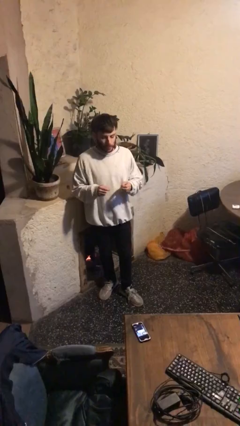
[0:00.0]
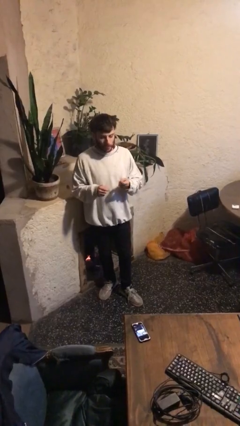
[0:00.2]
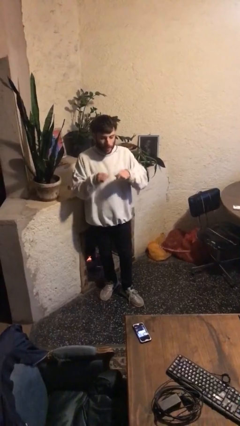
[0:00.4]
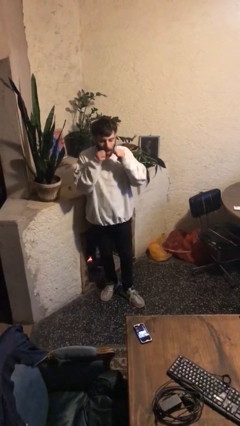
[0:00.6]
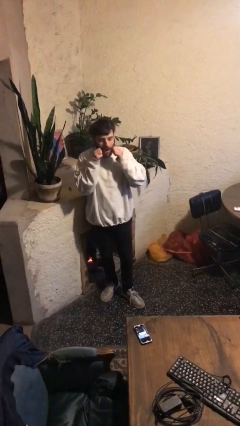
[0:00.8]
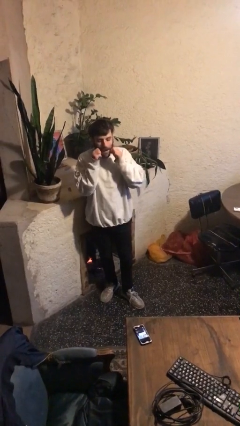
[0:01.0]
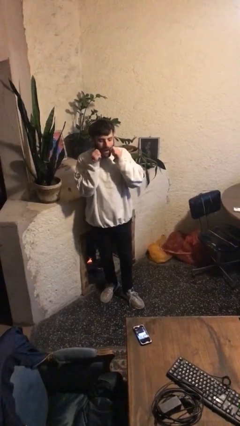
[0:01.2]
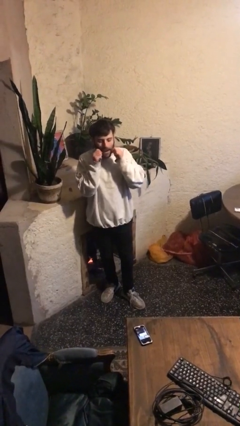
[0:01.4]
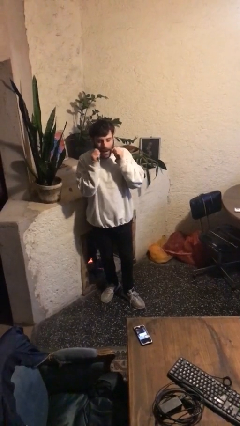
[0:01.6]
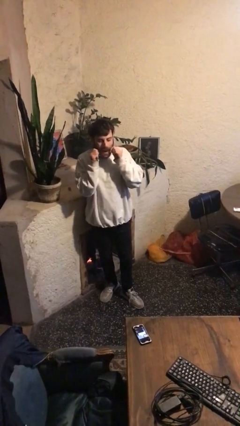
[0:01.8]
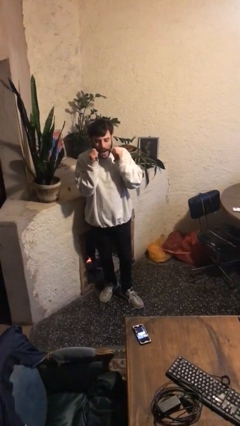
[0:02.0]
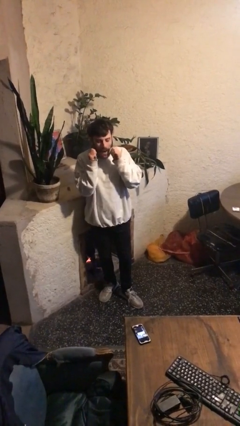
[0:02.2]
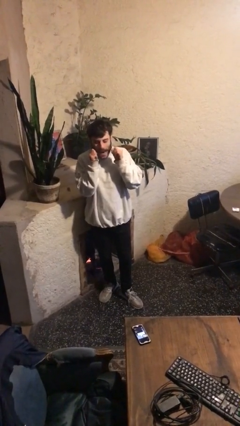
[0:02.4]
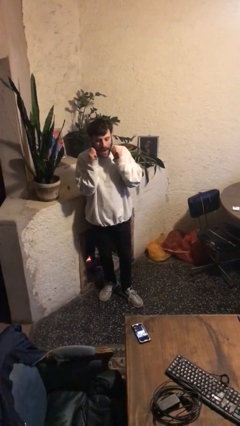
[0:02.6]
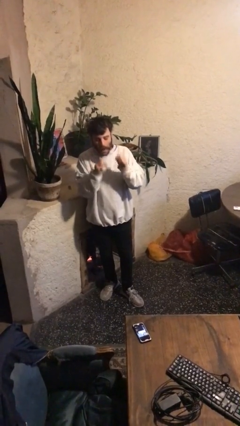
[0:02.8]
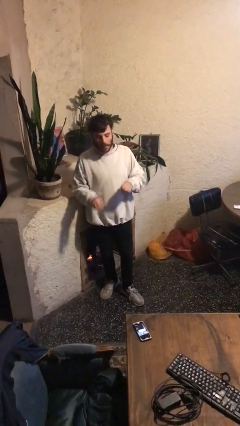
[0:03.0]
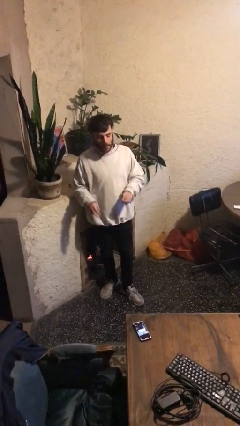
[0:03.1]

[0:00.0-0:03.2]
person flosses

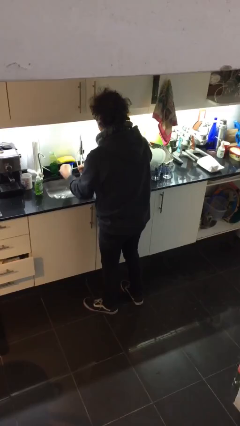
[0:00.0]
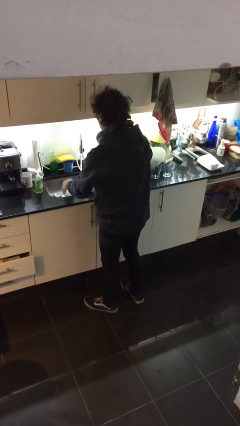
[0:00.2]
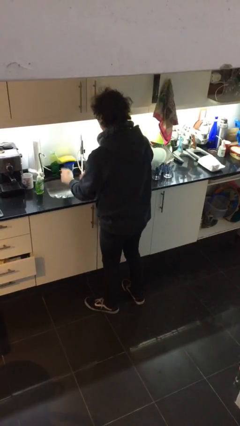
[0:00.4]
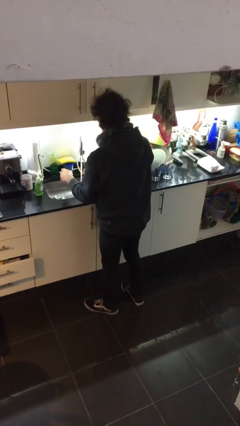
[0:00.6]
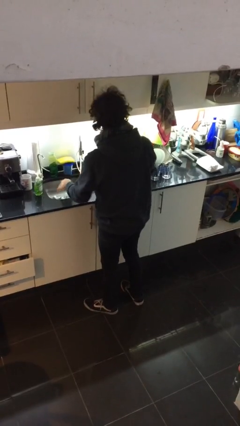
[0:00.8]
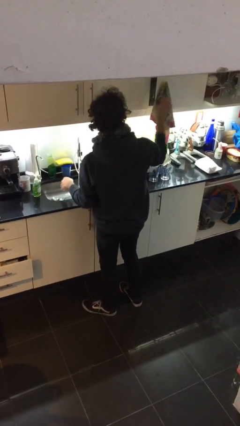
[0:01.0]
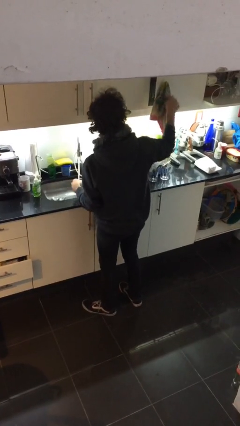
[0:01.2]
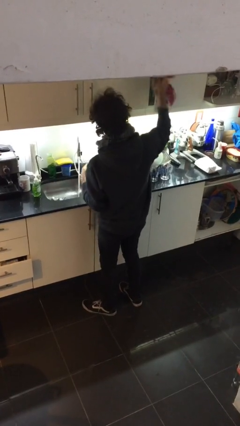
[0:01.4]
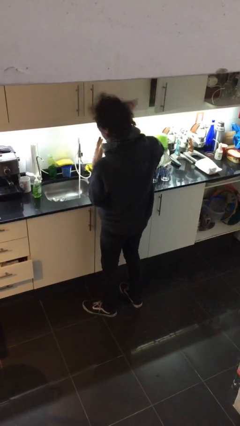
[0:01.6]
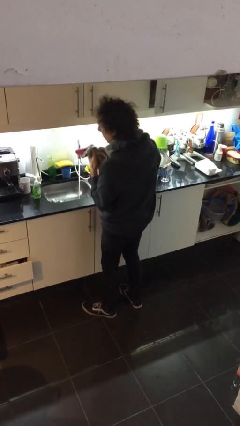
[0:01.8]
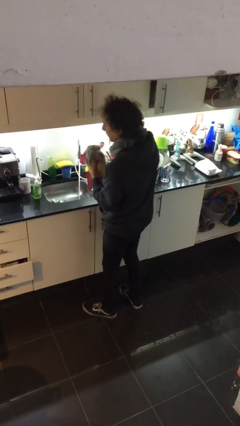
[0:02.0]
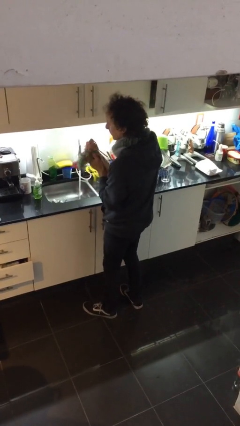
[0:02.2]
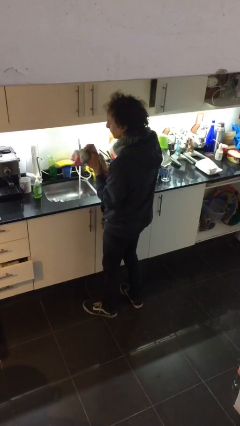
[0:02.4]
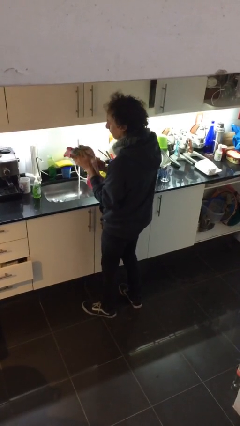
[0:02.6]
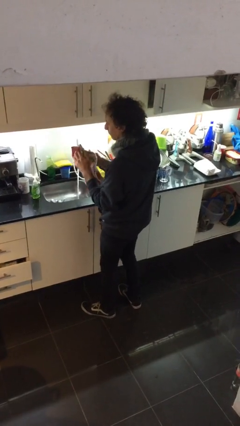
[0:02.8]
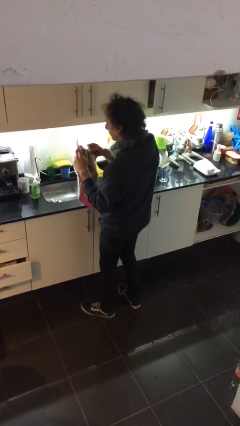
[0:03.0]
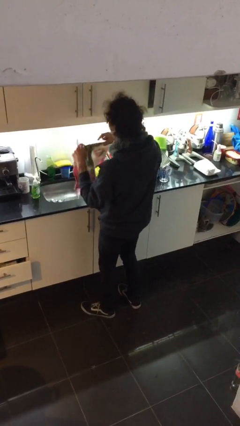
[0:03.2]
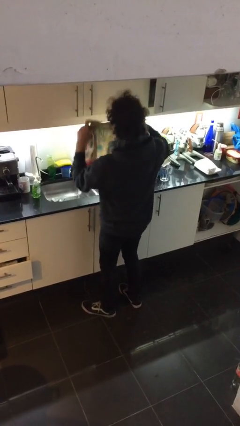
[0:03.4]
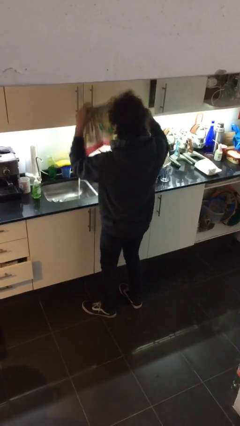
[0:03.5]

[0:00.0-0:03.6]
person dries hands with towel

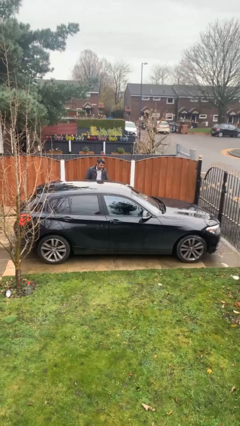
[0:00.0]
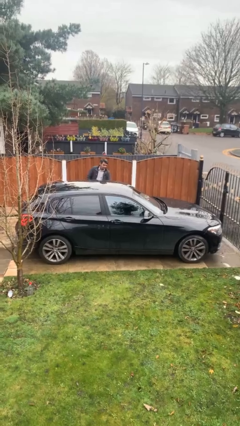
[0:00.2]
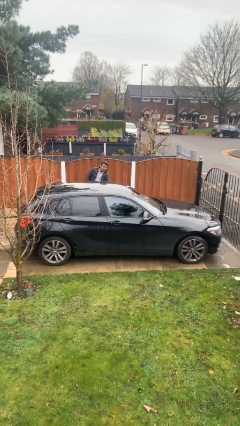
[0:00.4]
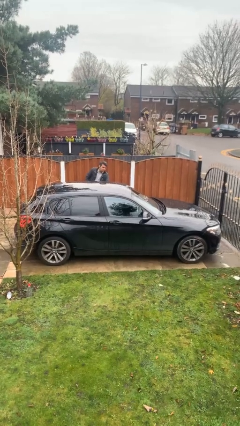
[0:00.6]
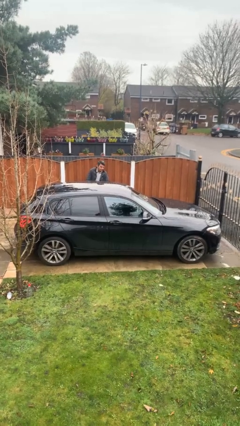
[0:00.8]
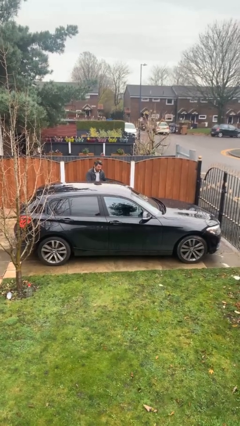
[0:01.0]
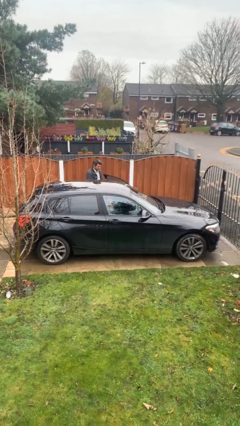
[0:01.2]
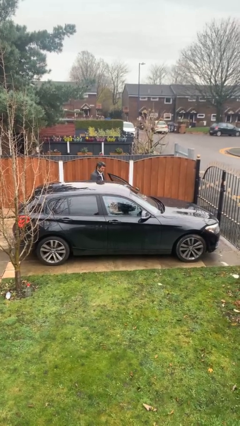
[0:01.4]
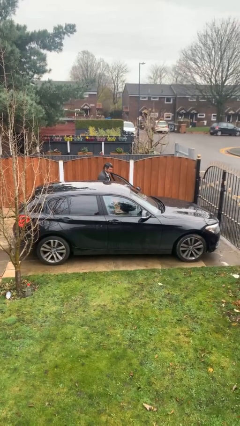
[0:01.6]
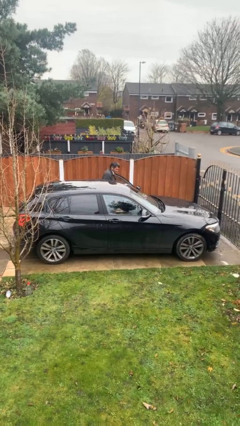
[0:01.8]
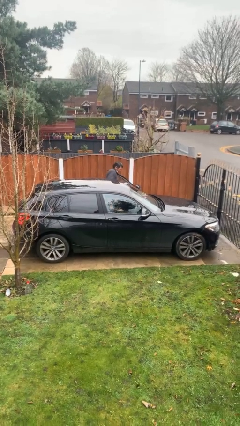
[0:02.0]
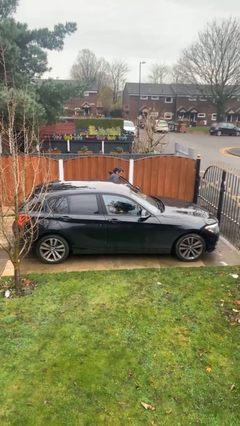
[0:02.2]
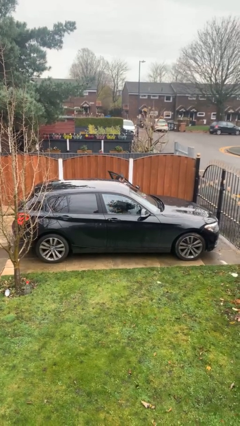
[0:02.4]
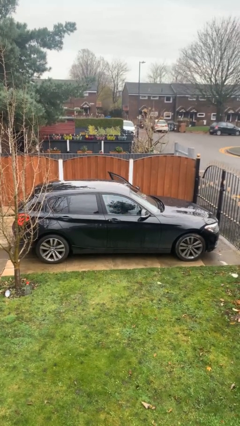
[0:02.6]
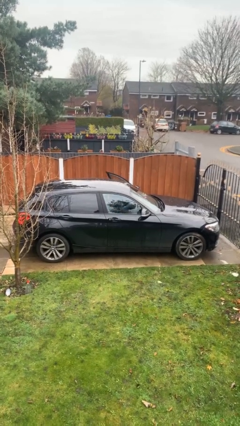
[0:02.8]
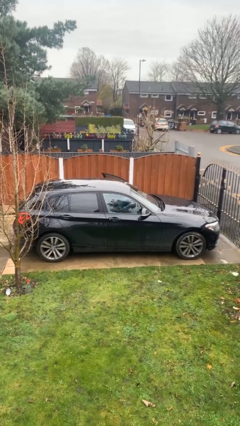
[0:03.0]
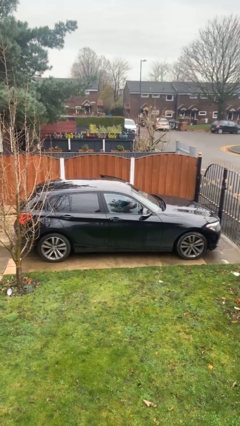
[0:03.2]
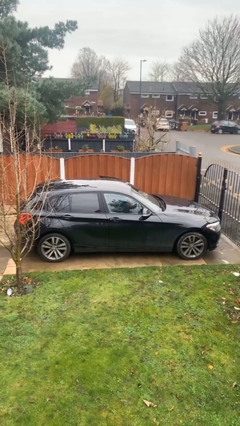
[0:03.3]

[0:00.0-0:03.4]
car picks up person

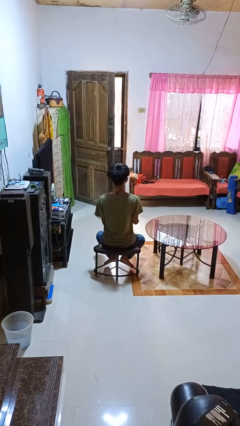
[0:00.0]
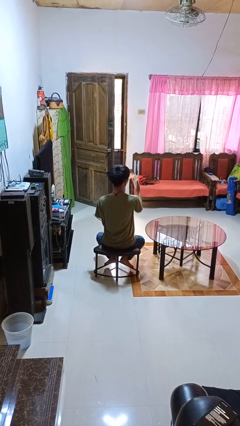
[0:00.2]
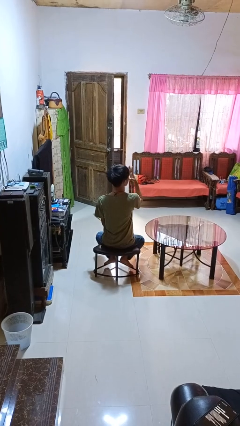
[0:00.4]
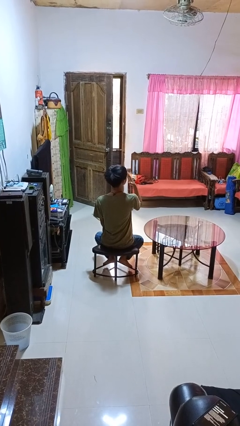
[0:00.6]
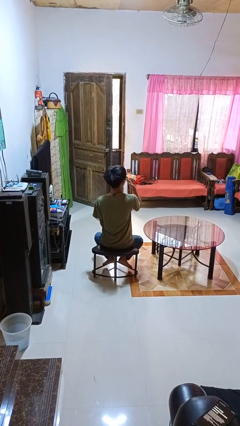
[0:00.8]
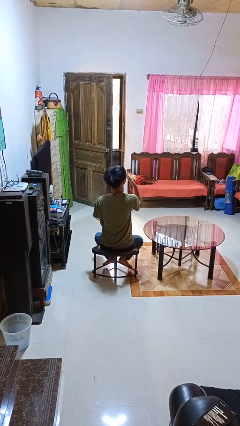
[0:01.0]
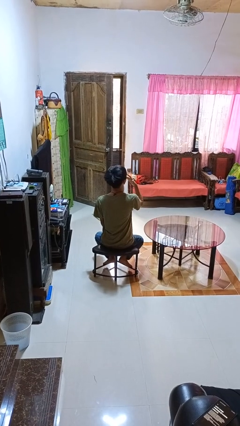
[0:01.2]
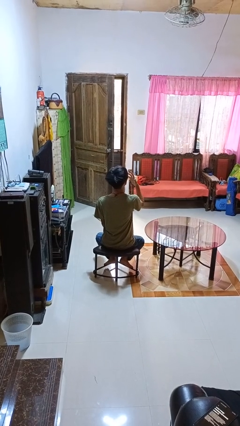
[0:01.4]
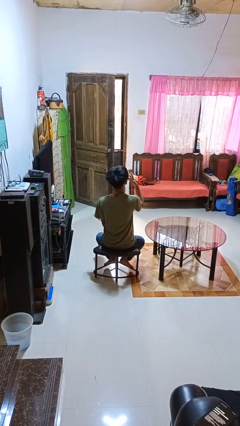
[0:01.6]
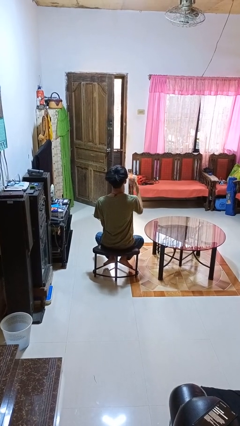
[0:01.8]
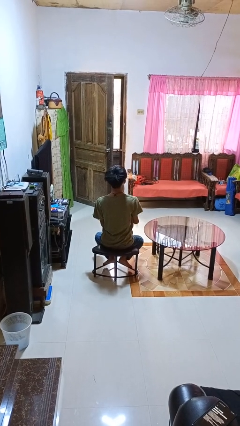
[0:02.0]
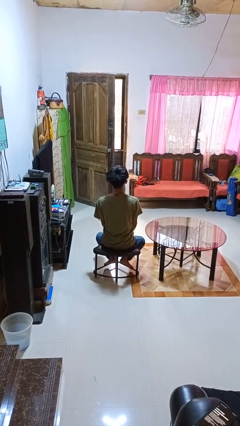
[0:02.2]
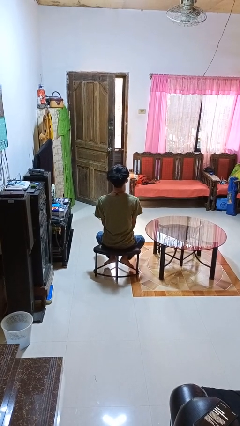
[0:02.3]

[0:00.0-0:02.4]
person licks fingers

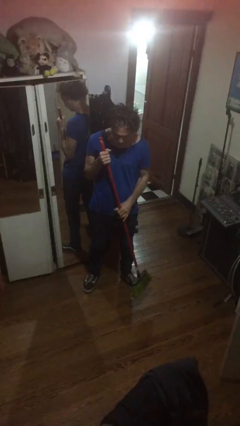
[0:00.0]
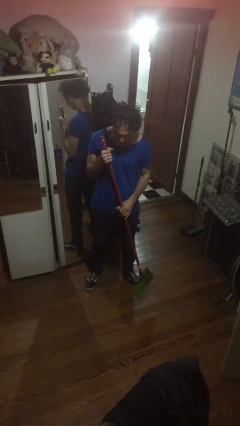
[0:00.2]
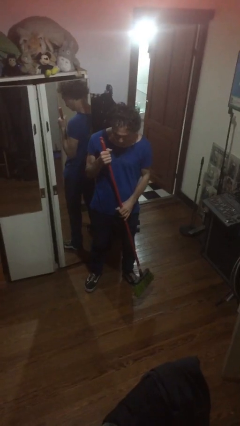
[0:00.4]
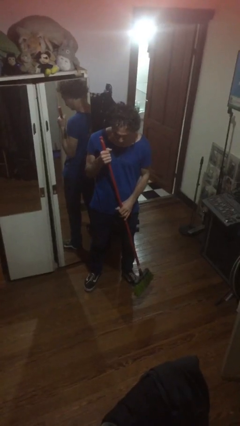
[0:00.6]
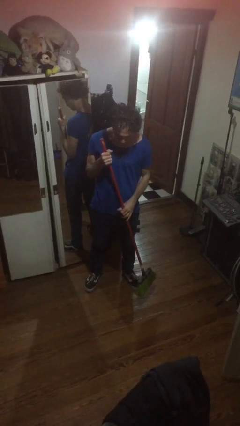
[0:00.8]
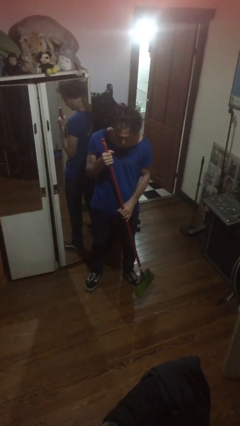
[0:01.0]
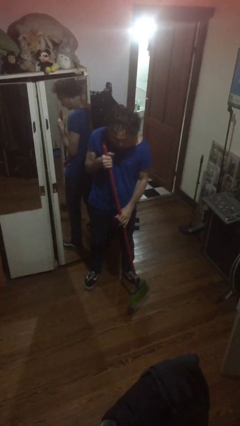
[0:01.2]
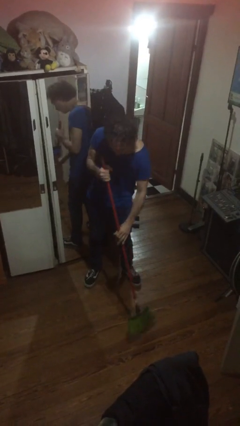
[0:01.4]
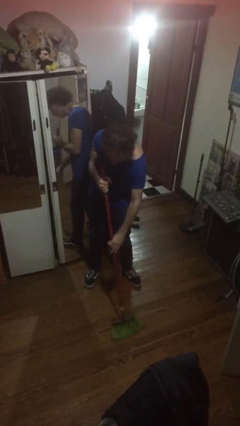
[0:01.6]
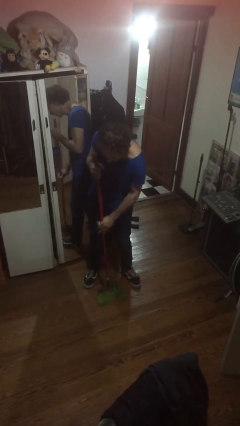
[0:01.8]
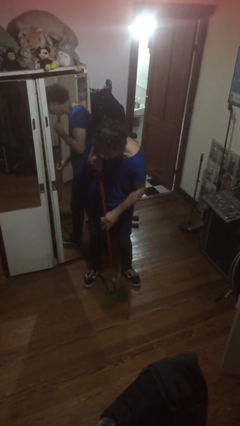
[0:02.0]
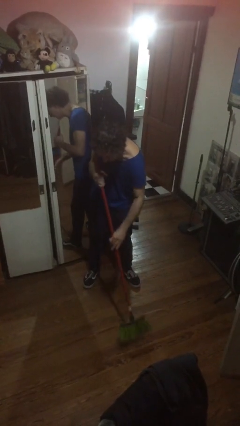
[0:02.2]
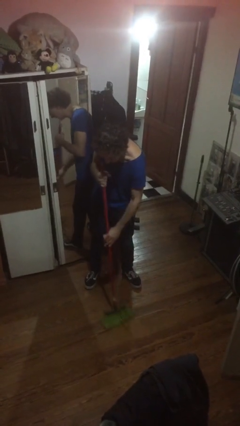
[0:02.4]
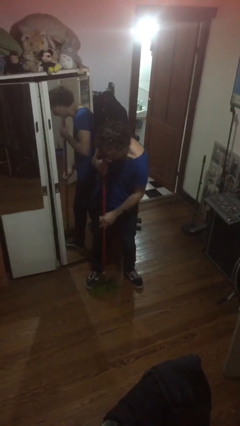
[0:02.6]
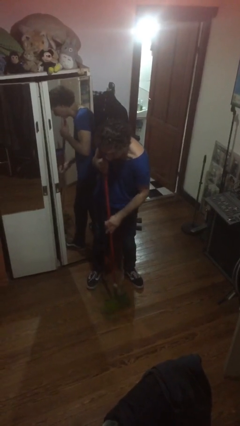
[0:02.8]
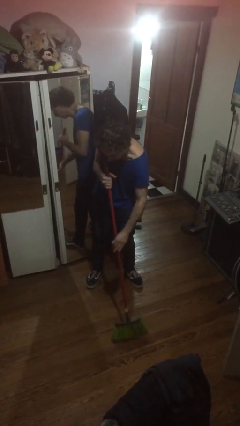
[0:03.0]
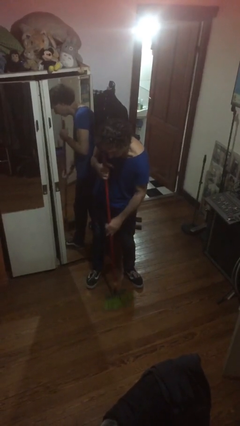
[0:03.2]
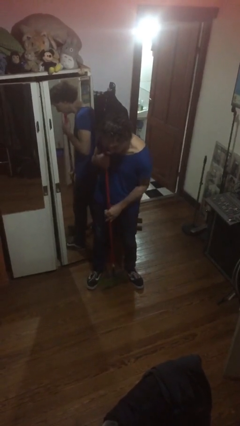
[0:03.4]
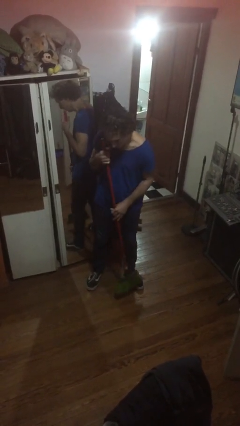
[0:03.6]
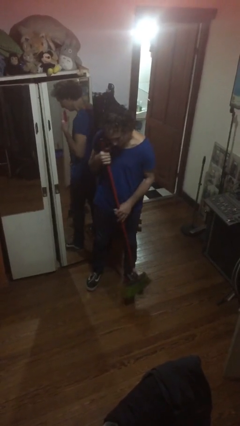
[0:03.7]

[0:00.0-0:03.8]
person sweeps floor

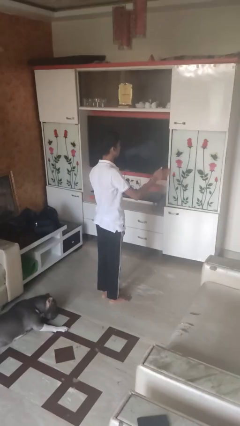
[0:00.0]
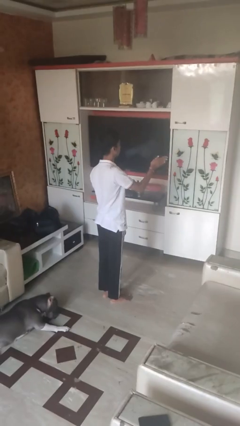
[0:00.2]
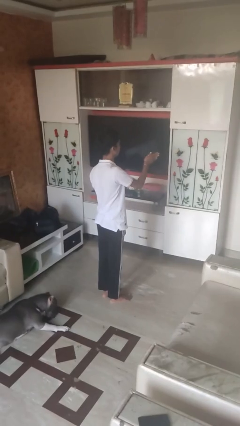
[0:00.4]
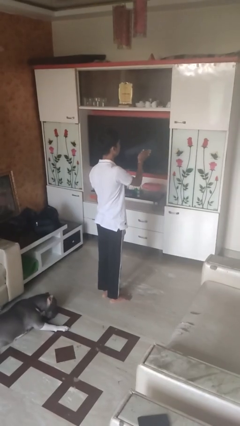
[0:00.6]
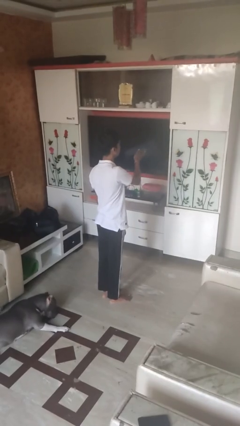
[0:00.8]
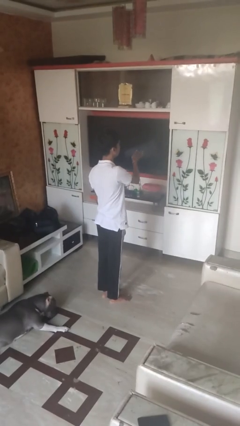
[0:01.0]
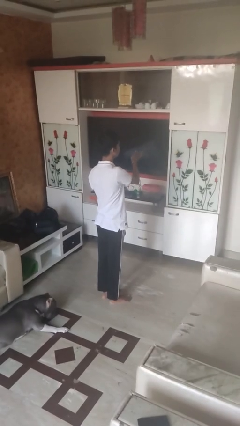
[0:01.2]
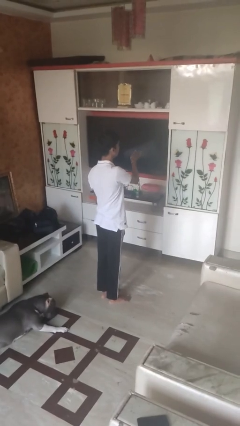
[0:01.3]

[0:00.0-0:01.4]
person gestures swipe left
